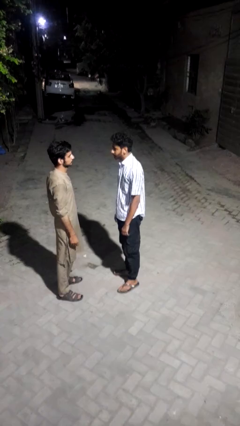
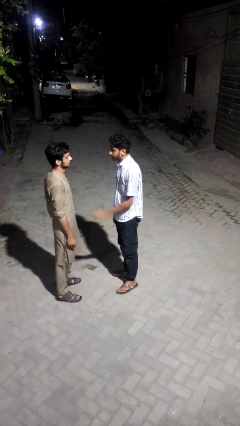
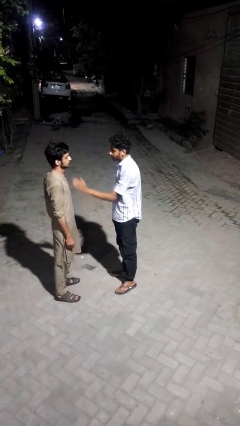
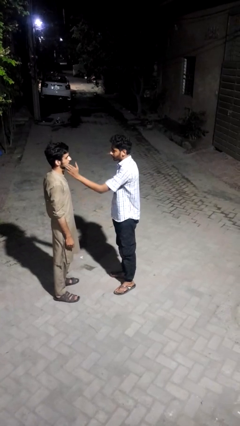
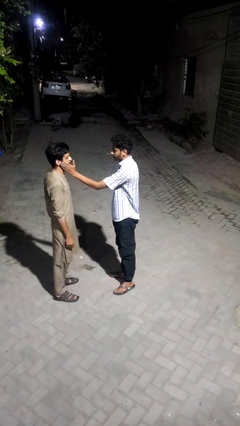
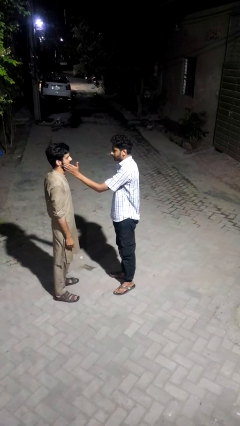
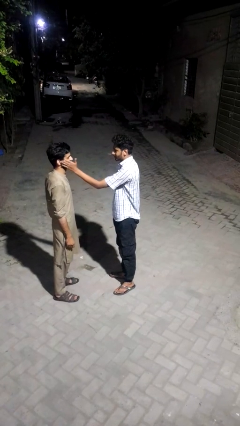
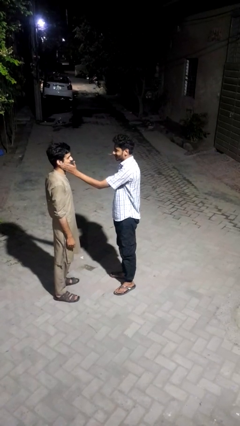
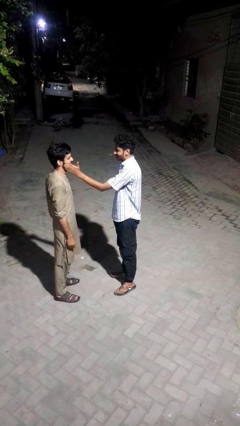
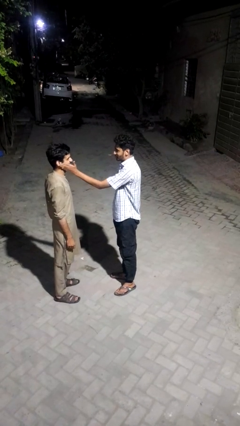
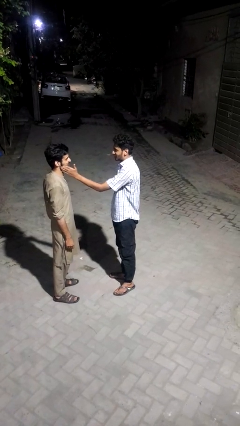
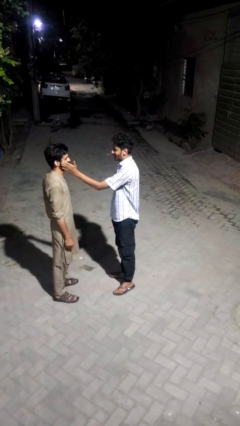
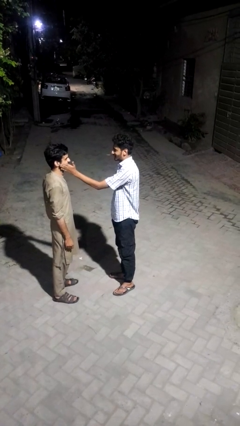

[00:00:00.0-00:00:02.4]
person touches face of person

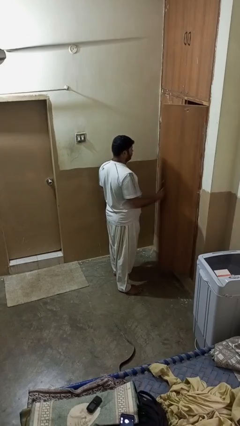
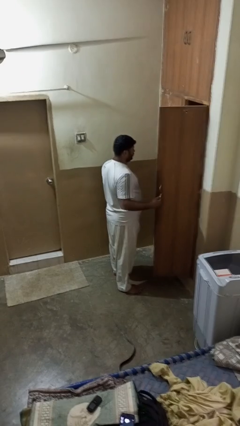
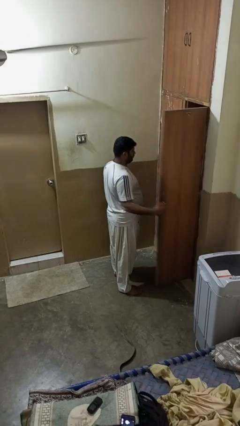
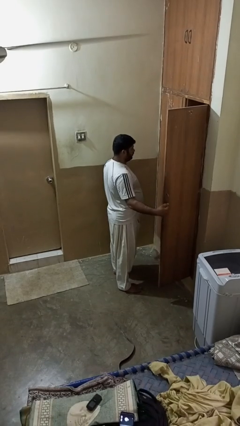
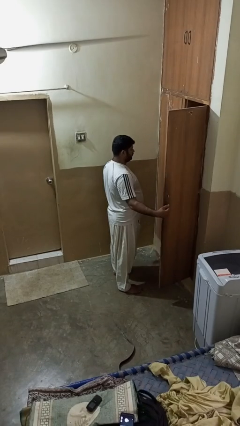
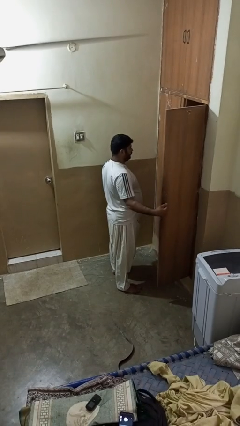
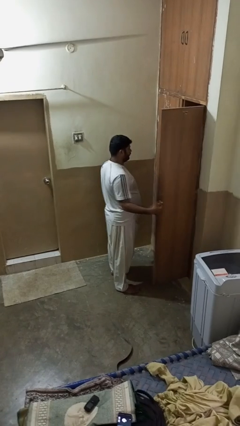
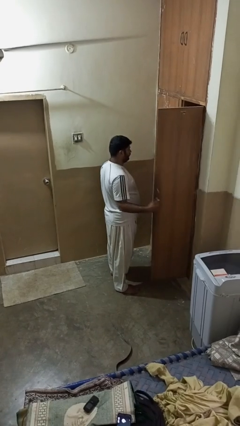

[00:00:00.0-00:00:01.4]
person opens closet door

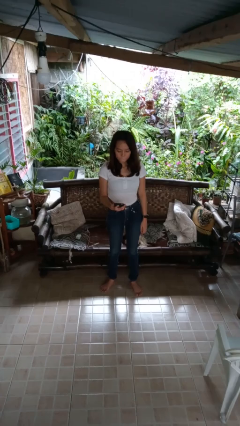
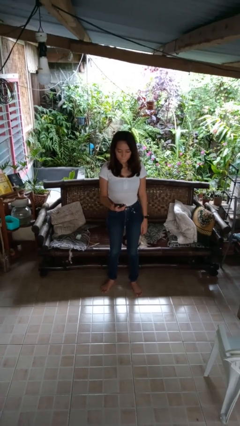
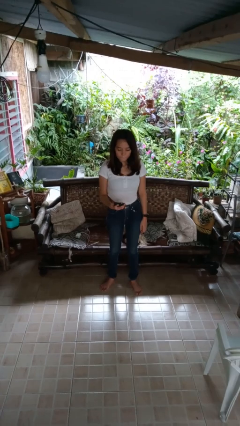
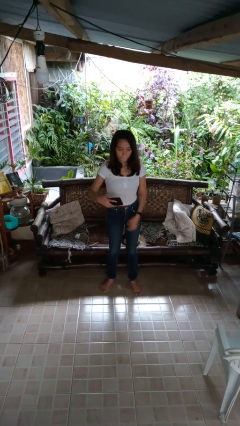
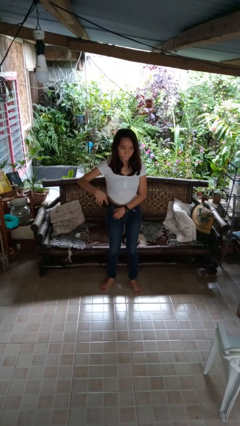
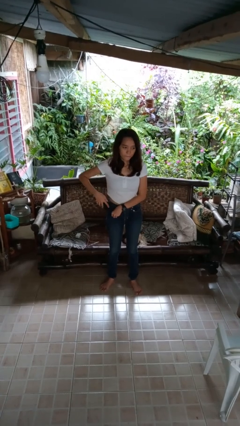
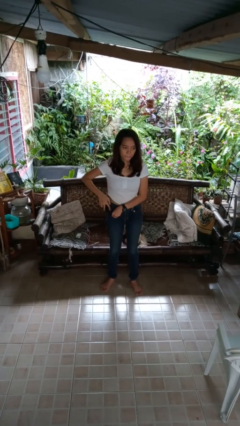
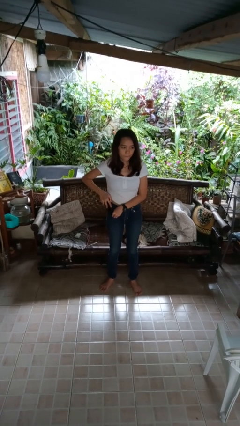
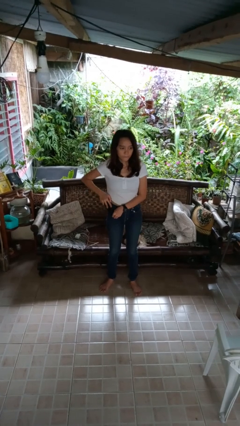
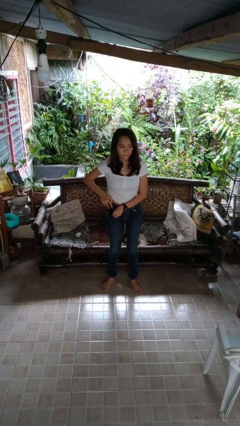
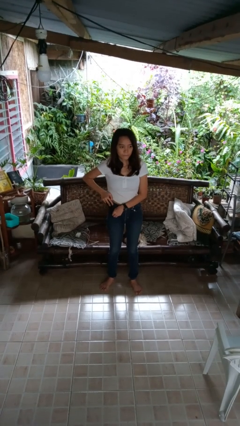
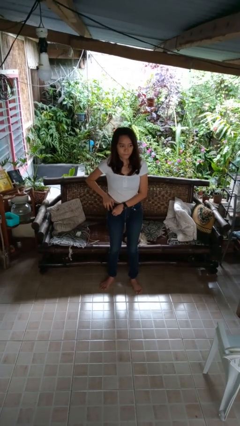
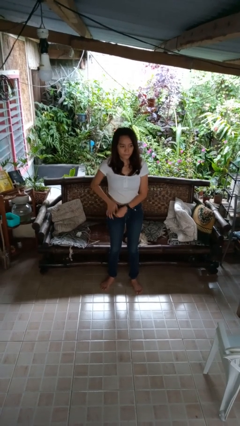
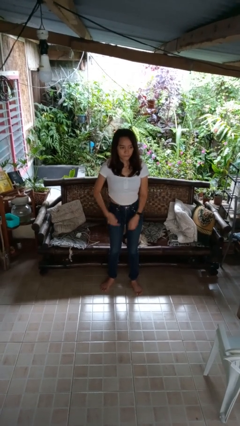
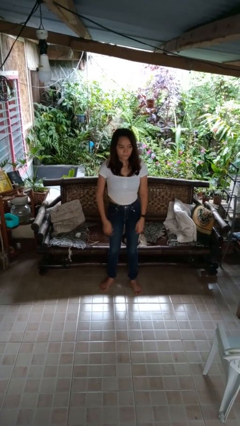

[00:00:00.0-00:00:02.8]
person puts phone into pocket

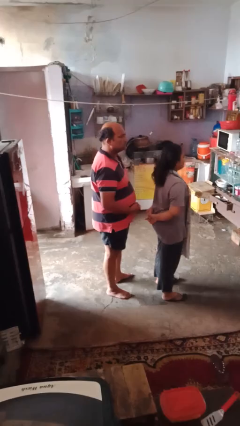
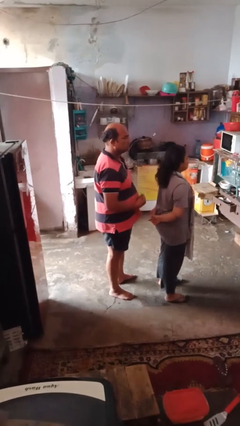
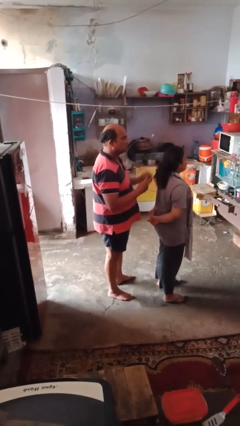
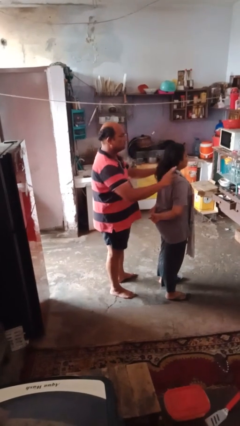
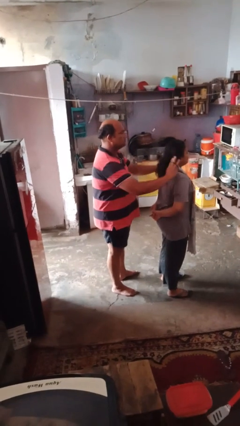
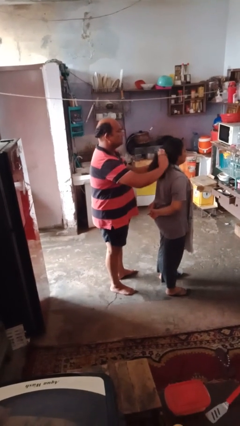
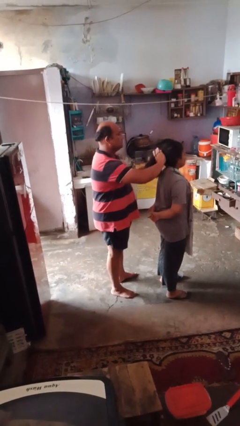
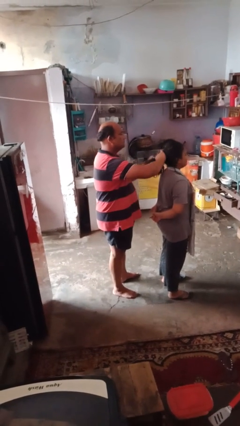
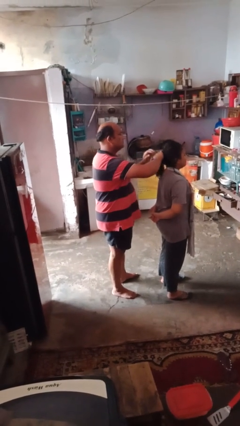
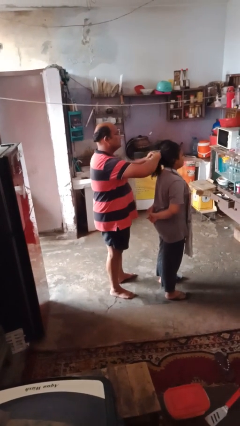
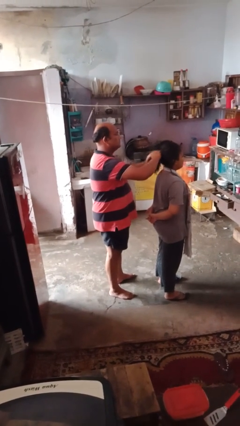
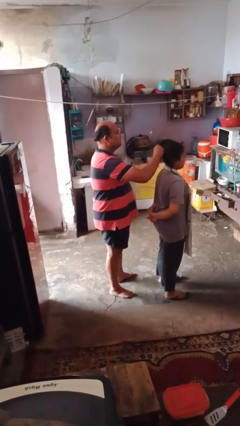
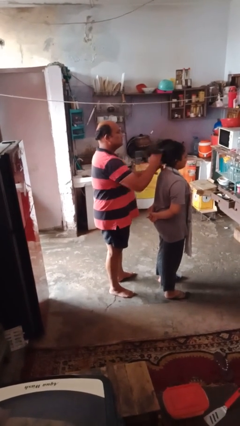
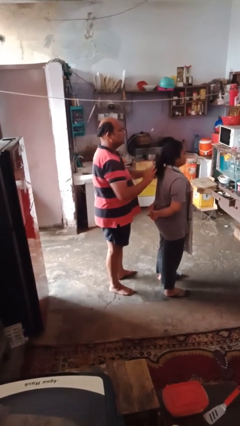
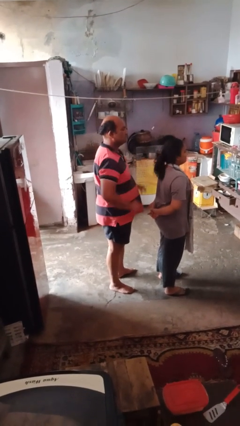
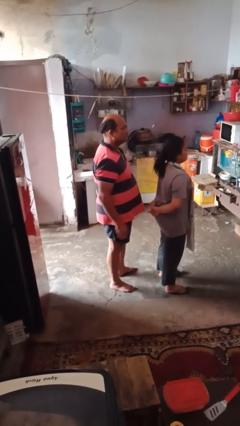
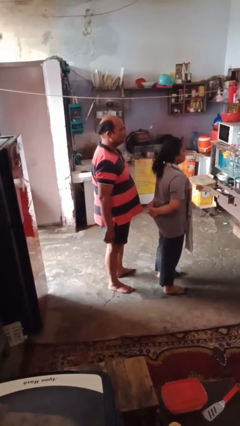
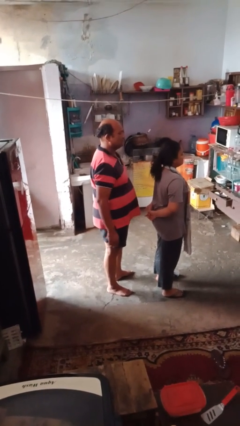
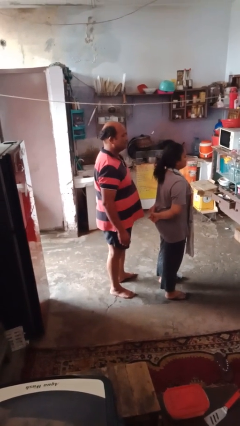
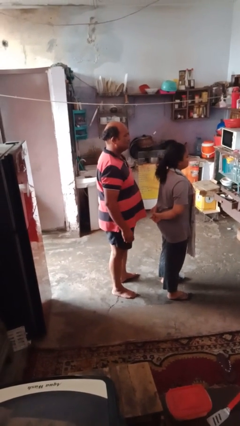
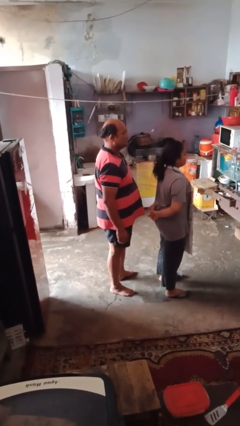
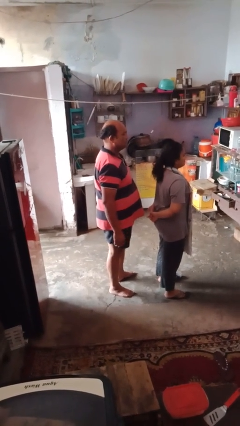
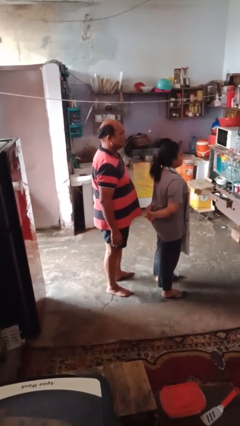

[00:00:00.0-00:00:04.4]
person braids hair of person

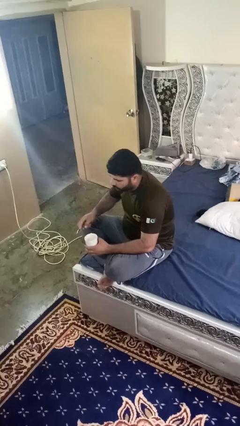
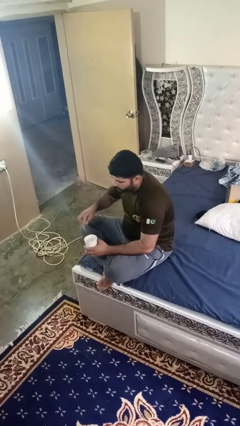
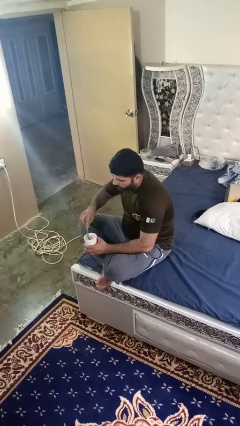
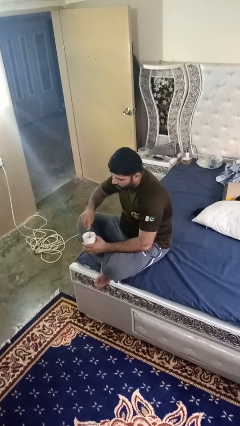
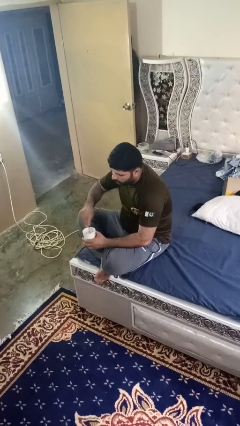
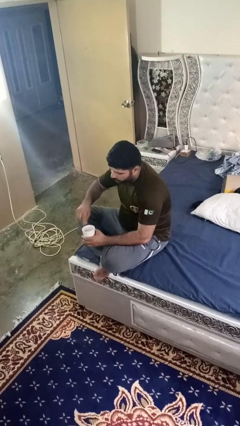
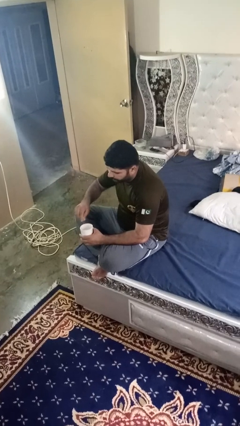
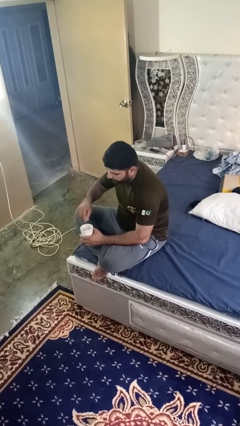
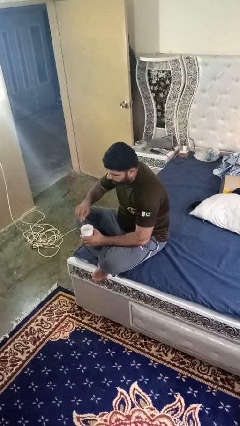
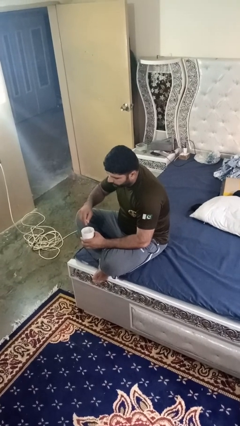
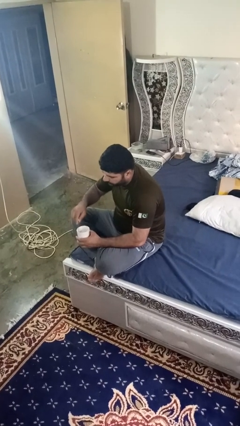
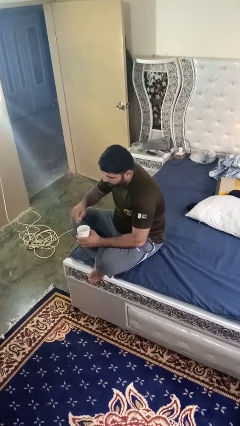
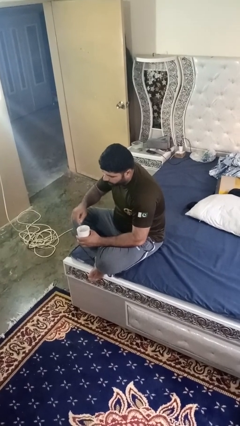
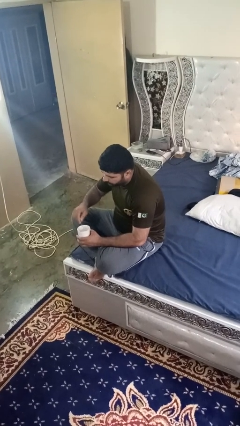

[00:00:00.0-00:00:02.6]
person stirs mug

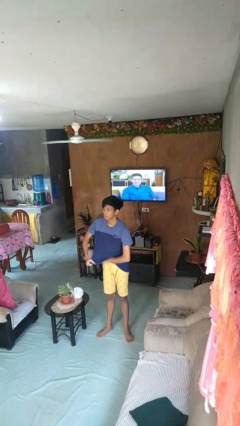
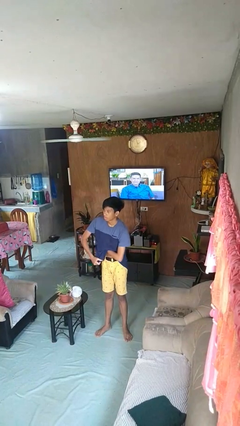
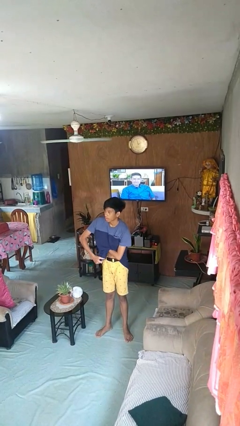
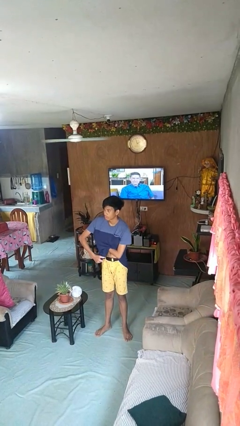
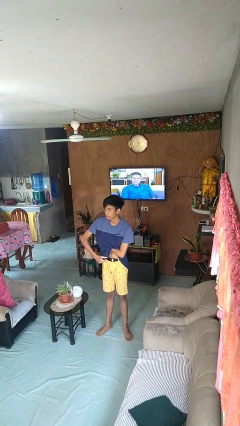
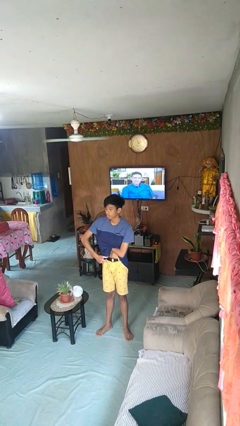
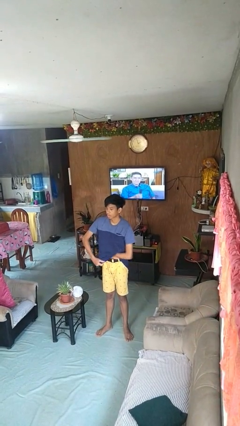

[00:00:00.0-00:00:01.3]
person applies deodorant

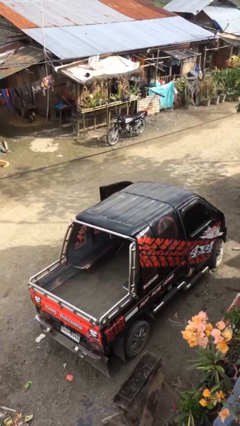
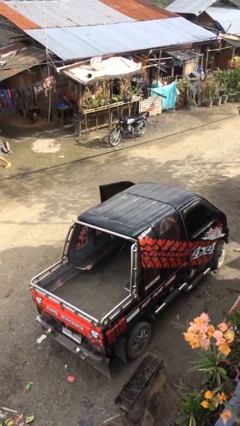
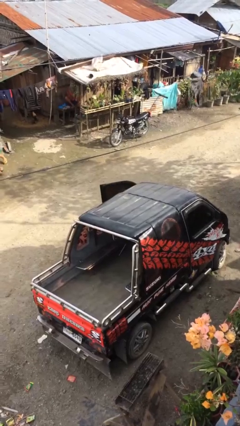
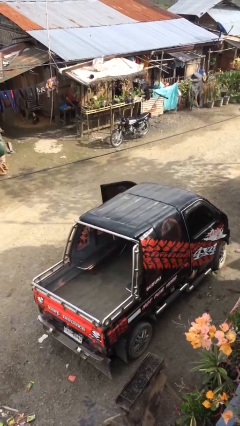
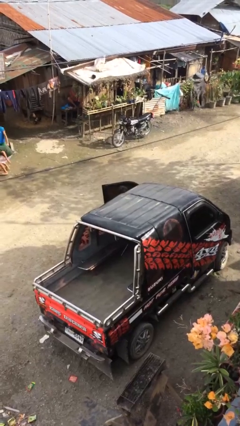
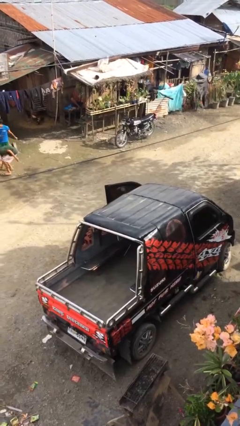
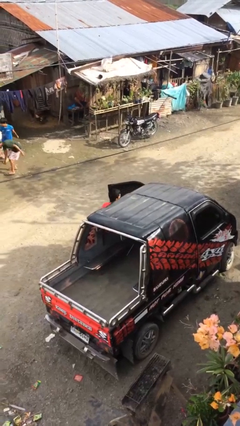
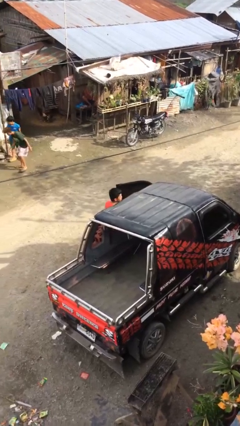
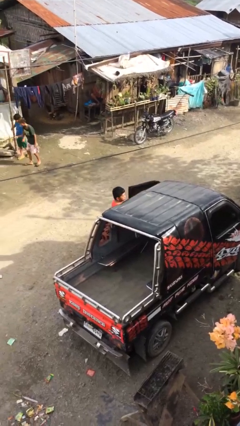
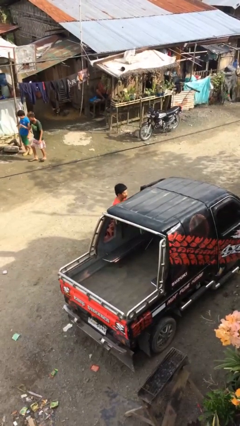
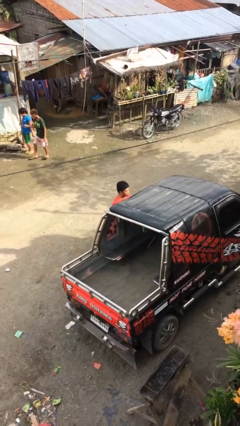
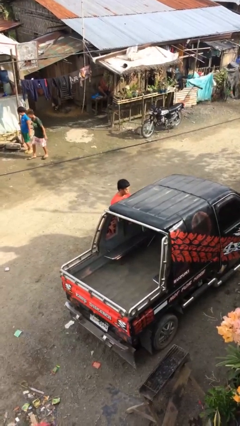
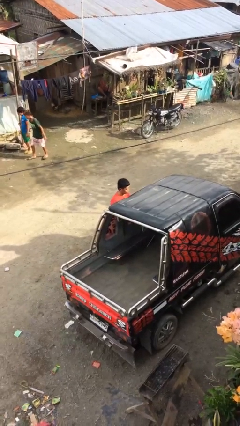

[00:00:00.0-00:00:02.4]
person exits car
